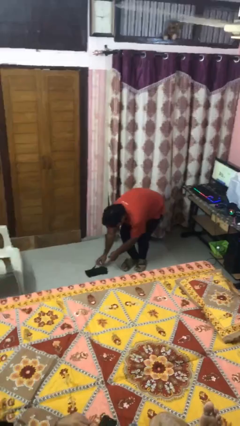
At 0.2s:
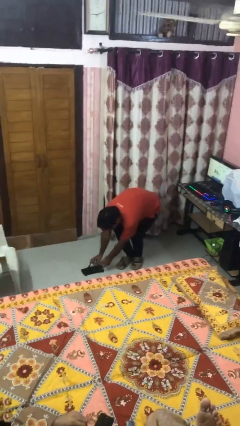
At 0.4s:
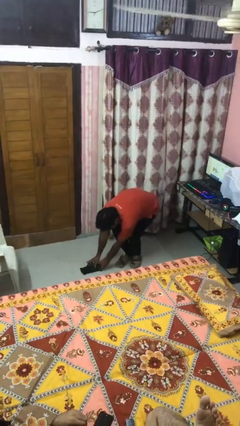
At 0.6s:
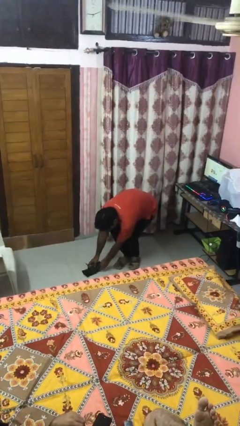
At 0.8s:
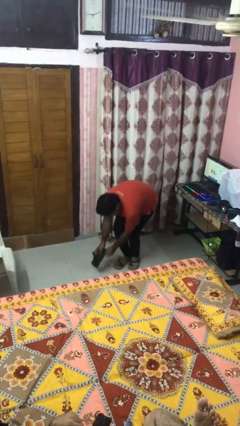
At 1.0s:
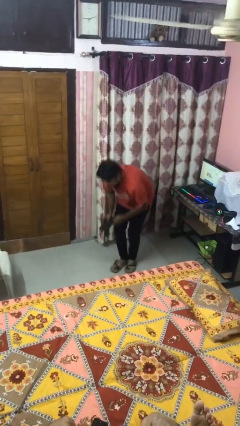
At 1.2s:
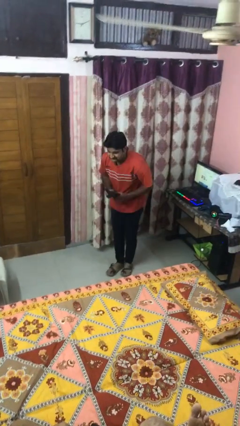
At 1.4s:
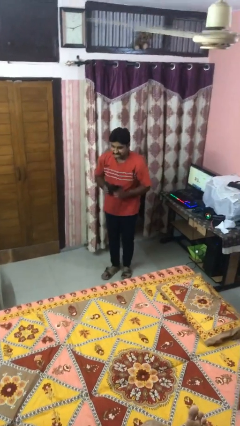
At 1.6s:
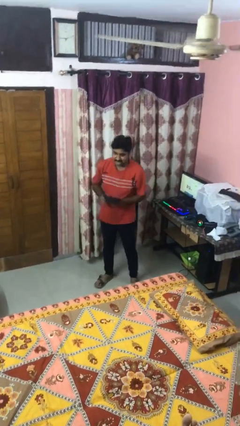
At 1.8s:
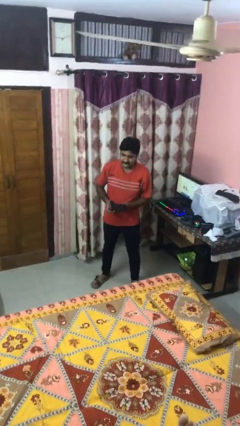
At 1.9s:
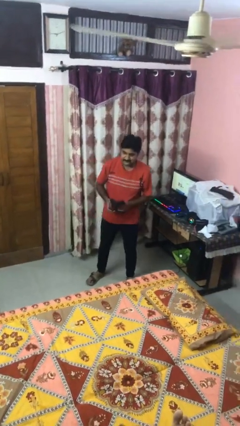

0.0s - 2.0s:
person picks up object from floor

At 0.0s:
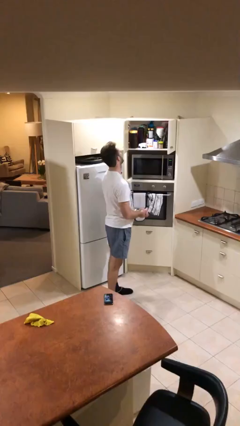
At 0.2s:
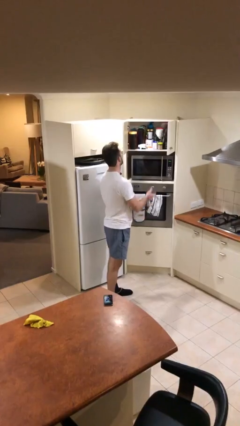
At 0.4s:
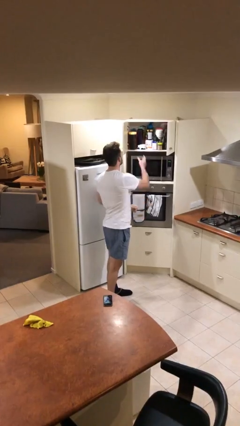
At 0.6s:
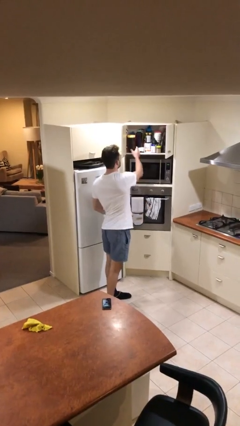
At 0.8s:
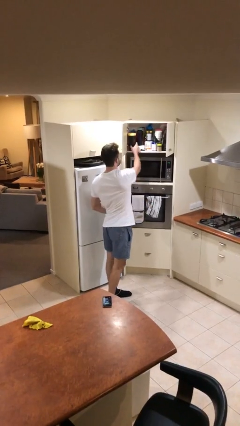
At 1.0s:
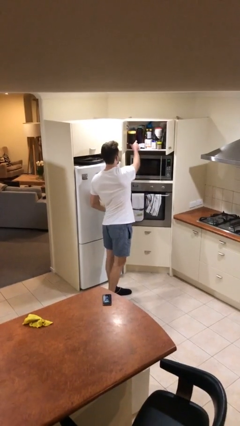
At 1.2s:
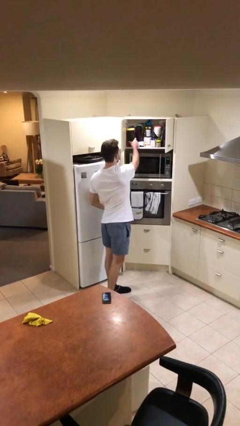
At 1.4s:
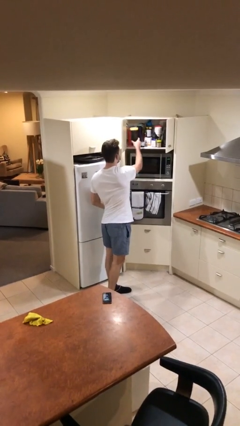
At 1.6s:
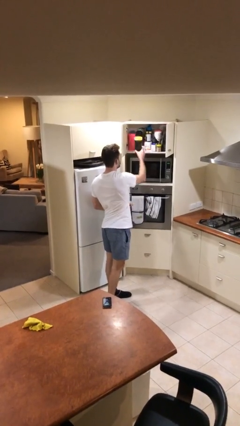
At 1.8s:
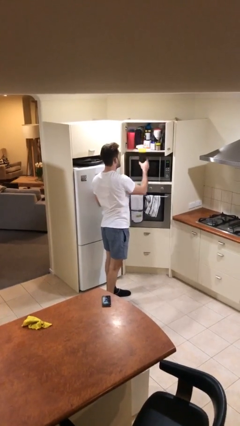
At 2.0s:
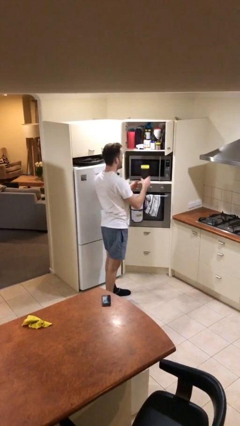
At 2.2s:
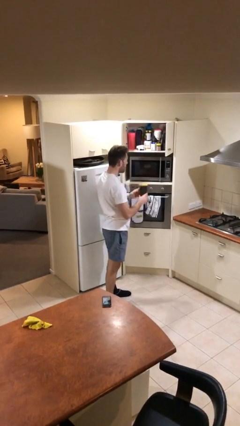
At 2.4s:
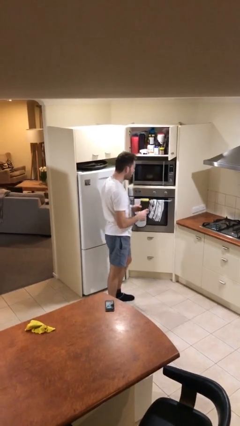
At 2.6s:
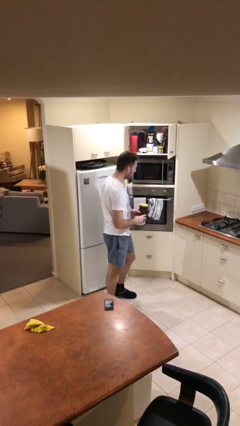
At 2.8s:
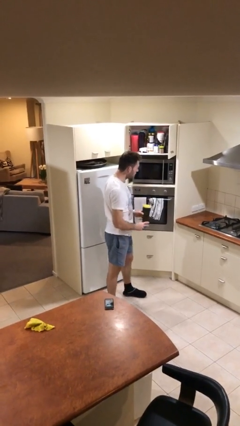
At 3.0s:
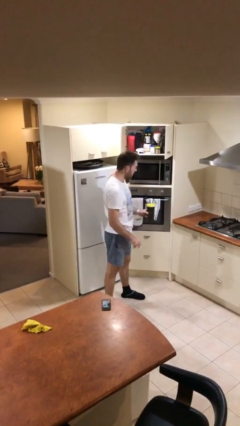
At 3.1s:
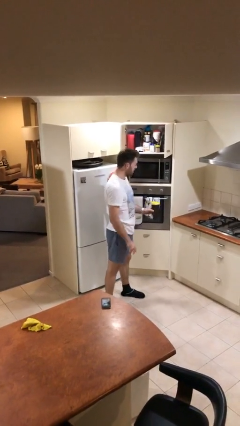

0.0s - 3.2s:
person picks up object from shelf

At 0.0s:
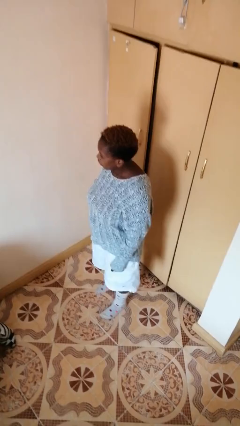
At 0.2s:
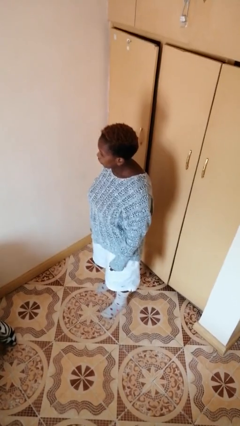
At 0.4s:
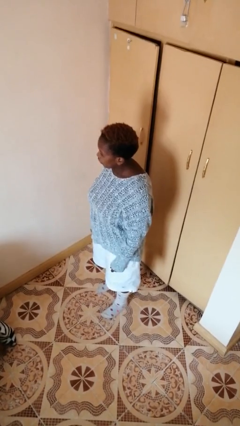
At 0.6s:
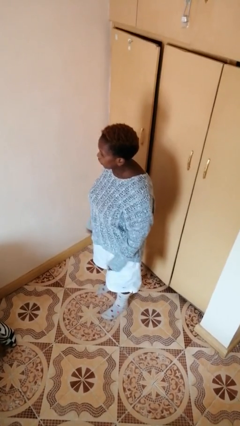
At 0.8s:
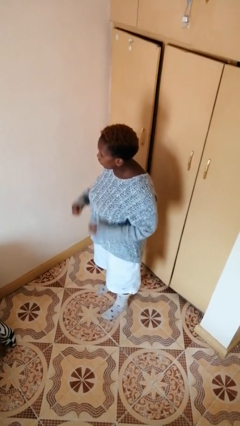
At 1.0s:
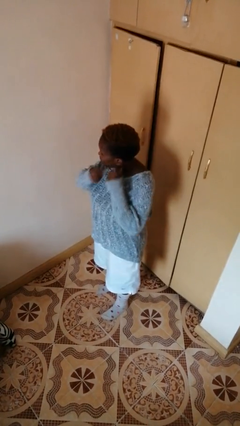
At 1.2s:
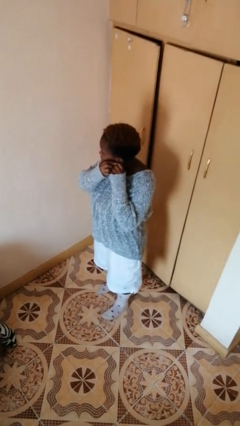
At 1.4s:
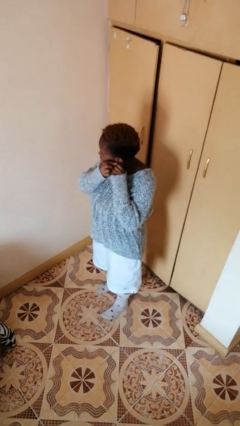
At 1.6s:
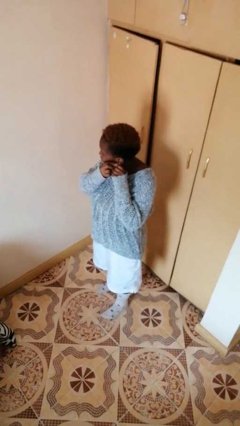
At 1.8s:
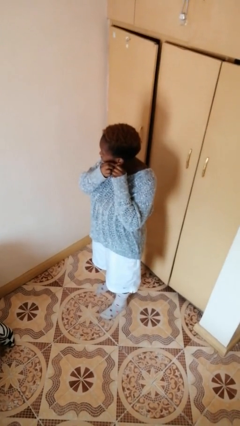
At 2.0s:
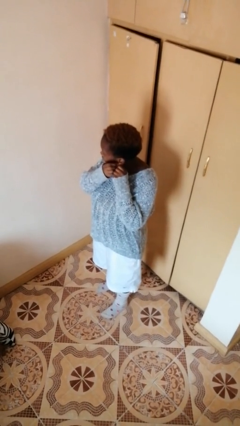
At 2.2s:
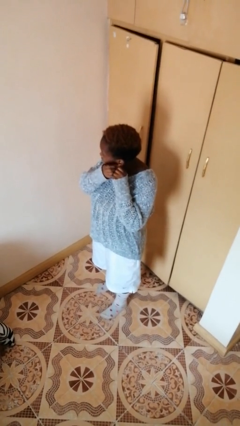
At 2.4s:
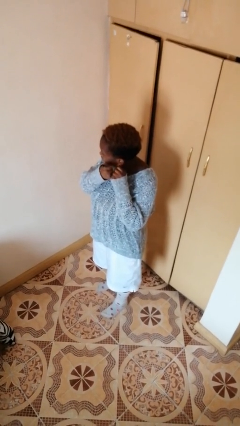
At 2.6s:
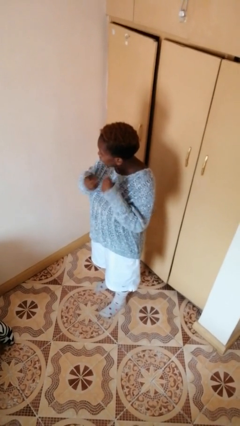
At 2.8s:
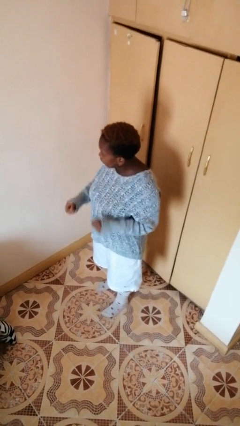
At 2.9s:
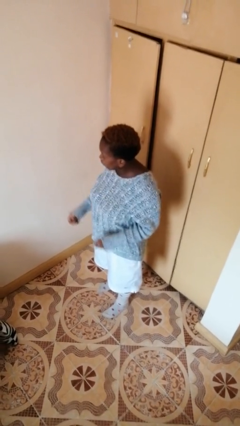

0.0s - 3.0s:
person takes off earrings

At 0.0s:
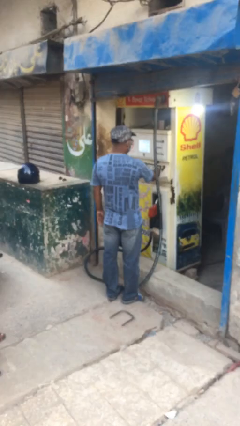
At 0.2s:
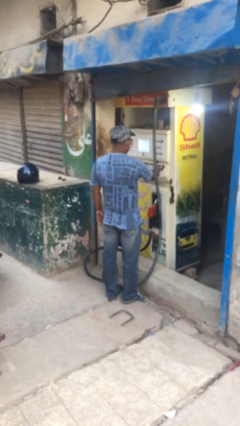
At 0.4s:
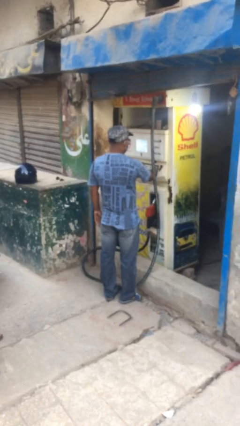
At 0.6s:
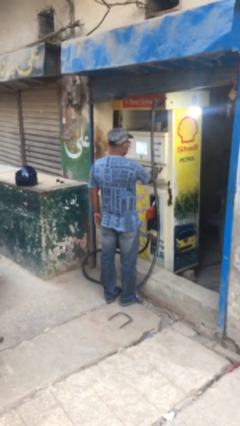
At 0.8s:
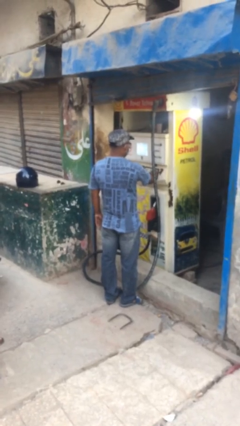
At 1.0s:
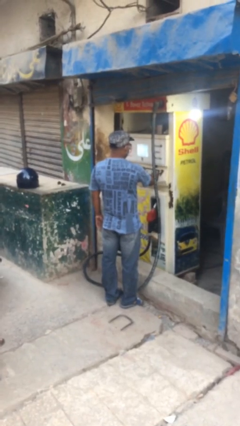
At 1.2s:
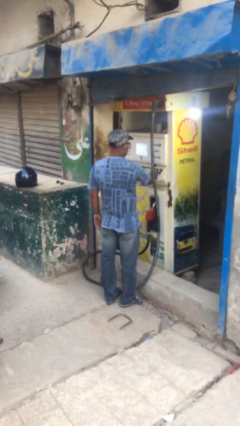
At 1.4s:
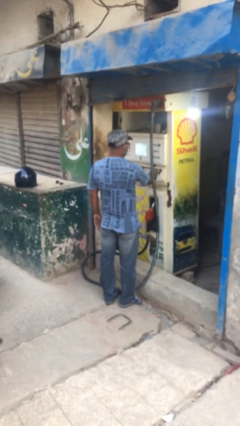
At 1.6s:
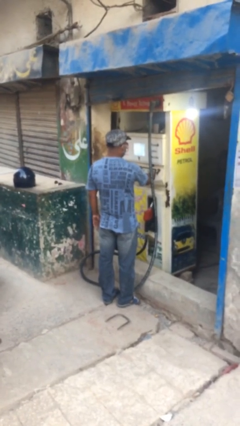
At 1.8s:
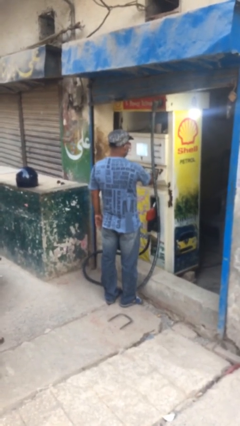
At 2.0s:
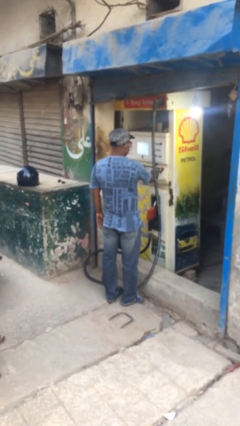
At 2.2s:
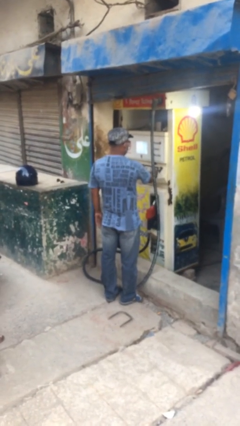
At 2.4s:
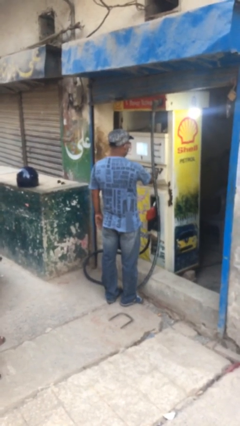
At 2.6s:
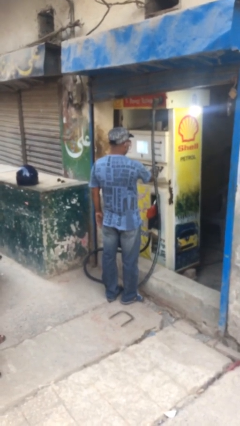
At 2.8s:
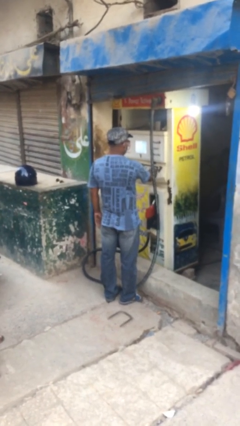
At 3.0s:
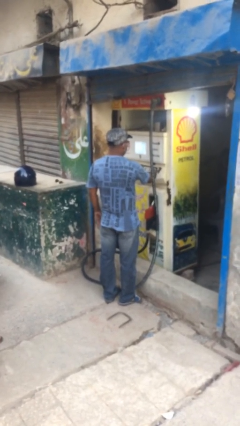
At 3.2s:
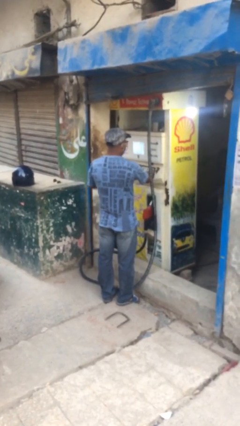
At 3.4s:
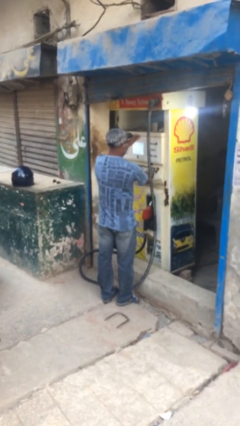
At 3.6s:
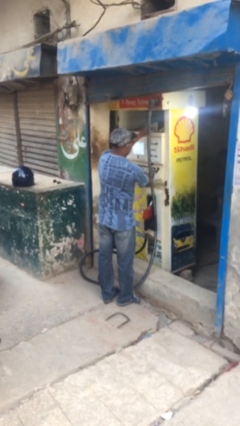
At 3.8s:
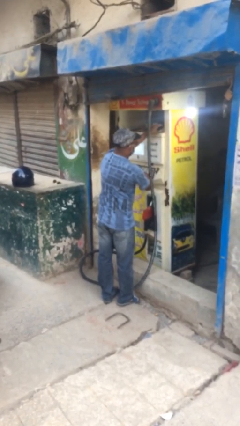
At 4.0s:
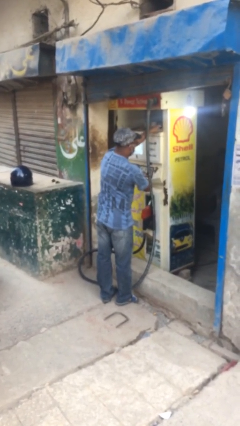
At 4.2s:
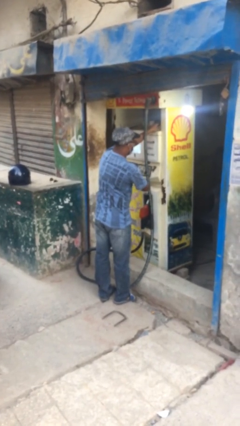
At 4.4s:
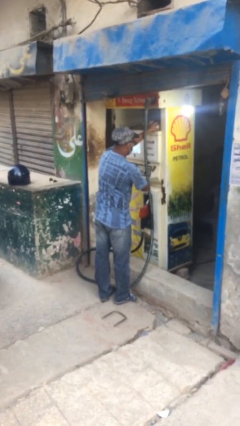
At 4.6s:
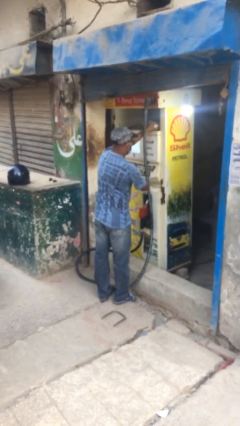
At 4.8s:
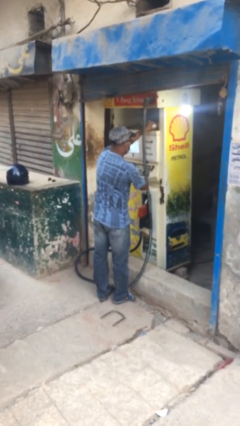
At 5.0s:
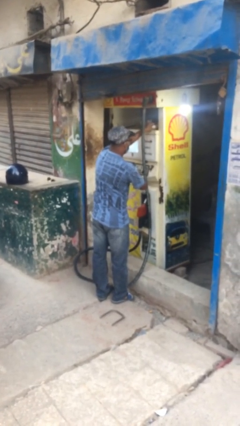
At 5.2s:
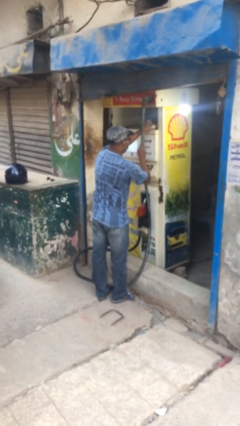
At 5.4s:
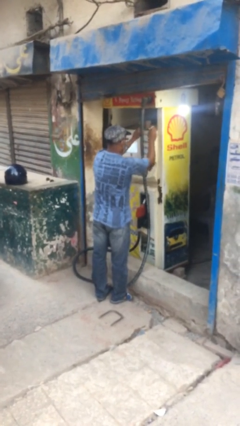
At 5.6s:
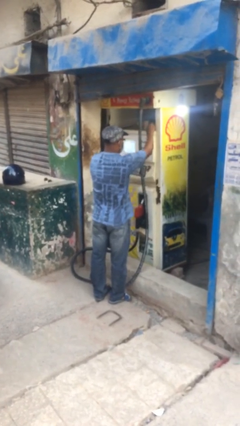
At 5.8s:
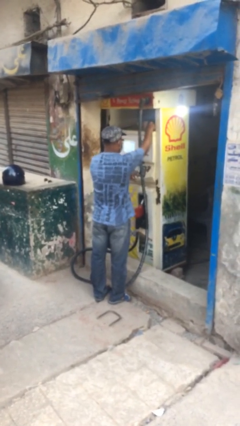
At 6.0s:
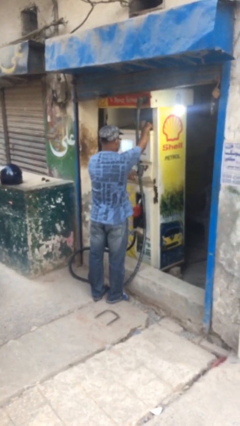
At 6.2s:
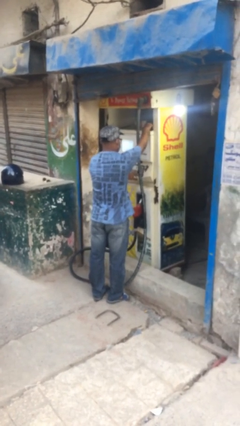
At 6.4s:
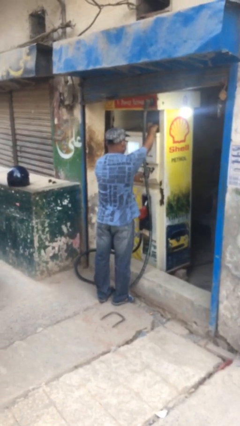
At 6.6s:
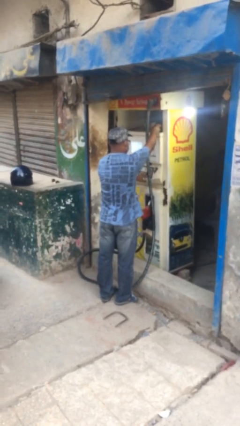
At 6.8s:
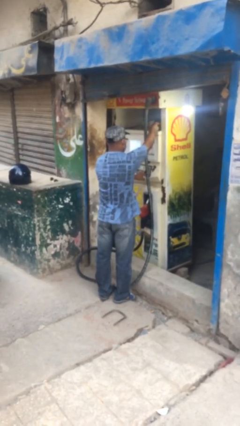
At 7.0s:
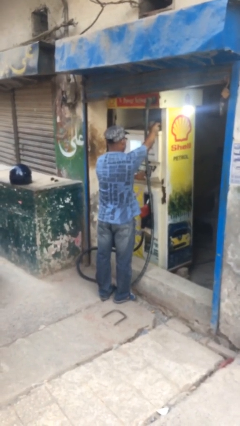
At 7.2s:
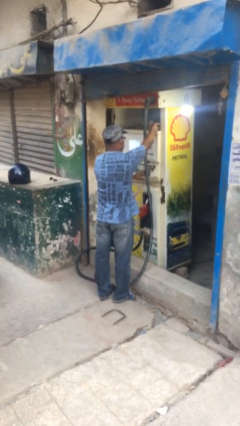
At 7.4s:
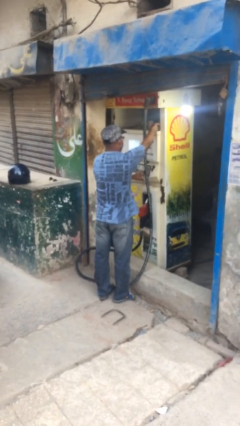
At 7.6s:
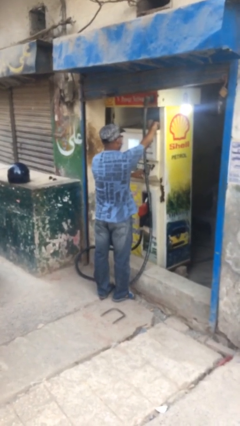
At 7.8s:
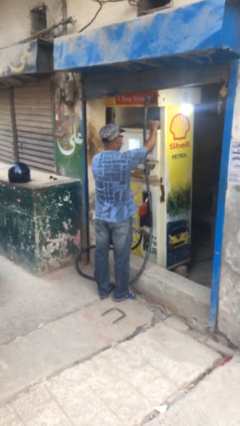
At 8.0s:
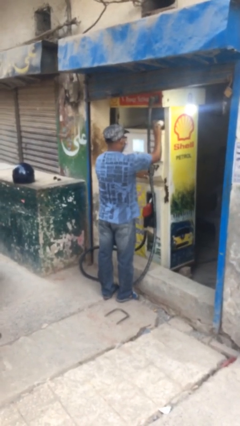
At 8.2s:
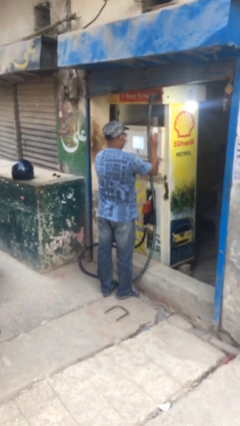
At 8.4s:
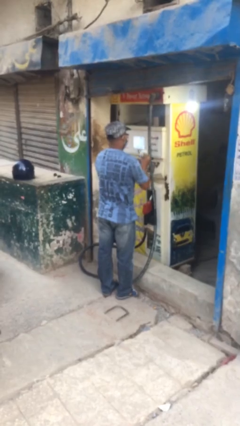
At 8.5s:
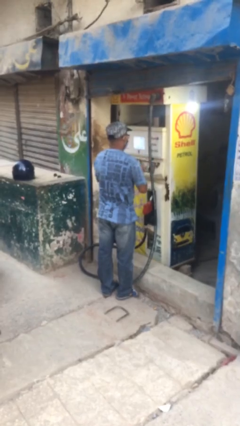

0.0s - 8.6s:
person purchases from machine

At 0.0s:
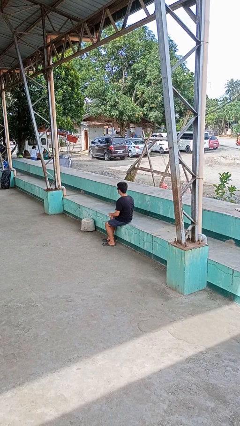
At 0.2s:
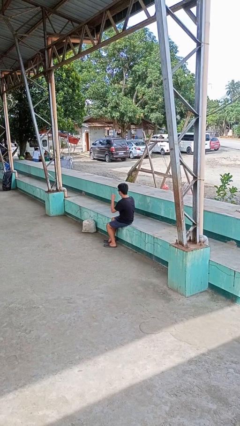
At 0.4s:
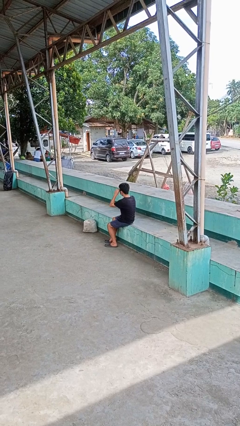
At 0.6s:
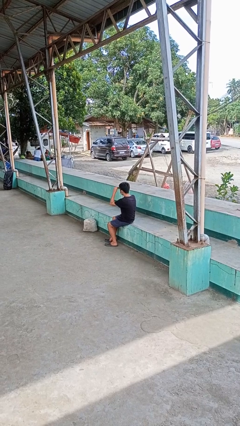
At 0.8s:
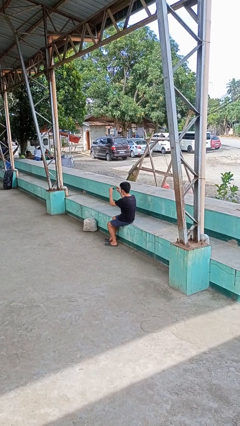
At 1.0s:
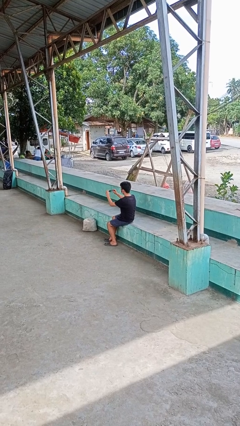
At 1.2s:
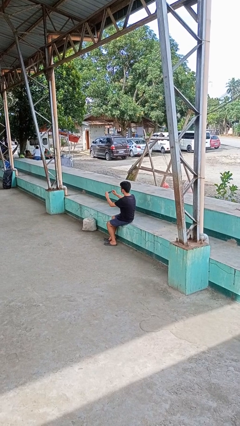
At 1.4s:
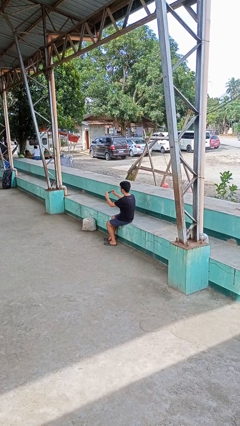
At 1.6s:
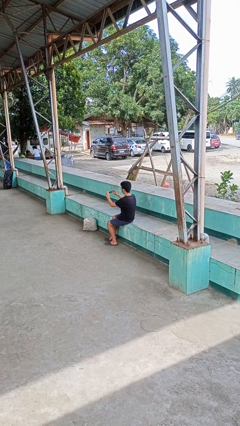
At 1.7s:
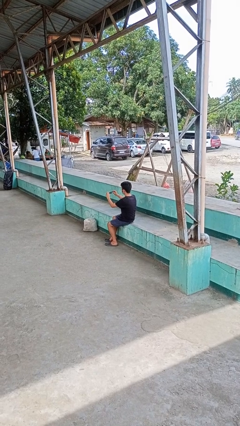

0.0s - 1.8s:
person takes off sunglasses
